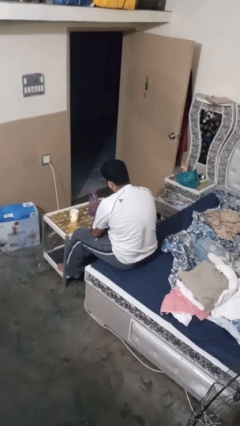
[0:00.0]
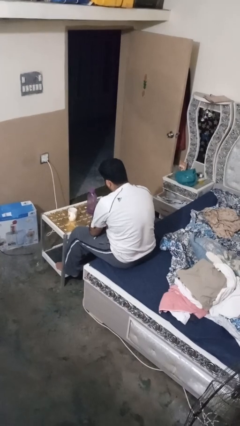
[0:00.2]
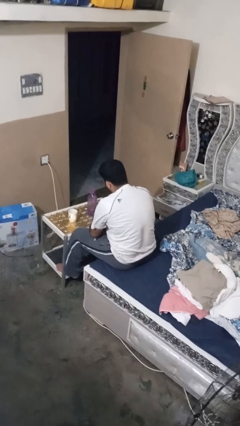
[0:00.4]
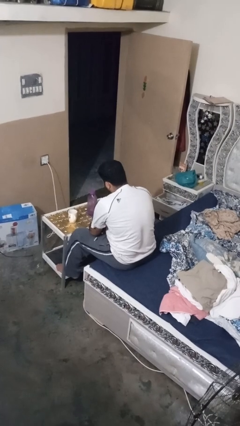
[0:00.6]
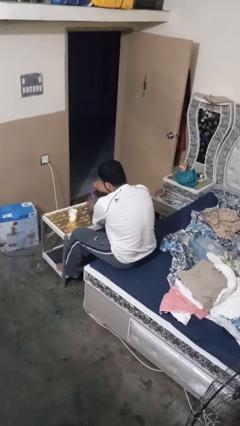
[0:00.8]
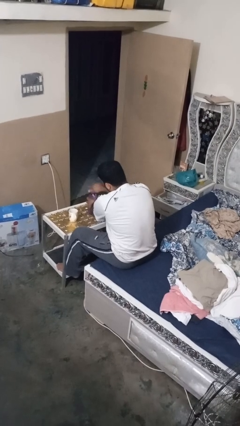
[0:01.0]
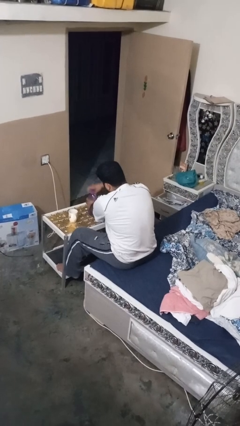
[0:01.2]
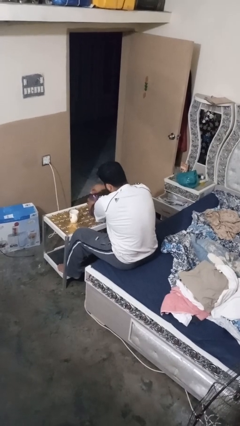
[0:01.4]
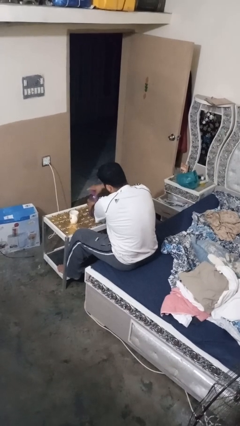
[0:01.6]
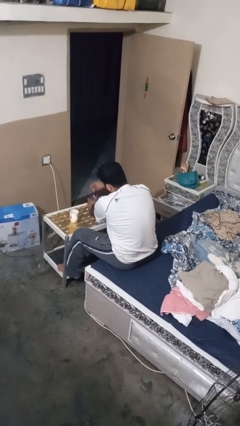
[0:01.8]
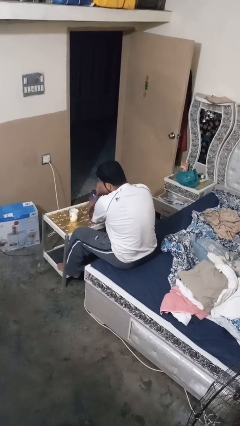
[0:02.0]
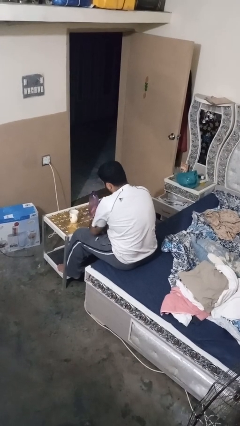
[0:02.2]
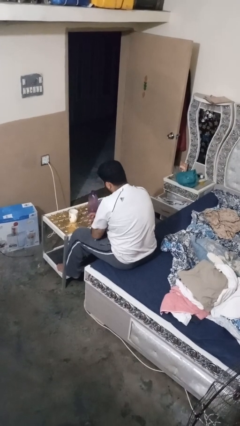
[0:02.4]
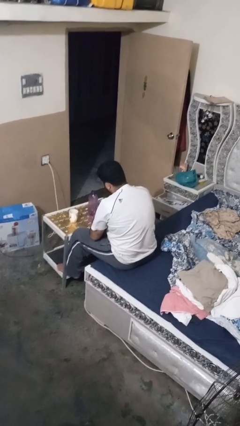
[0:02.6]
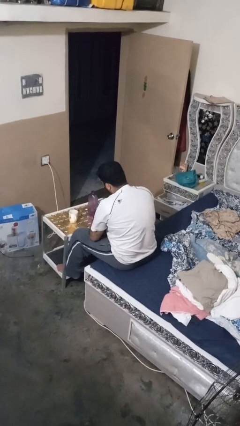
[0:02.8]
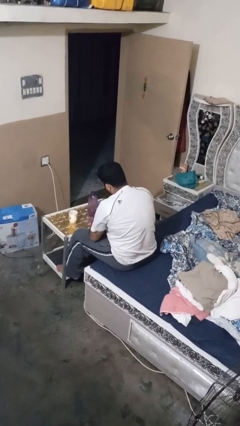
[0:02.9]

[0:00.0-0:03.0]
person unscrews lid from bottle

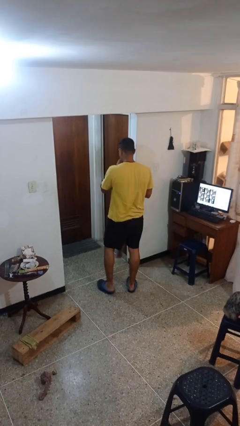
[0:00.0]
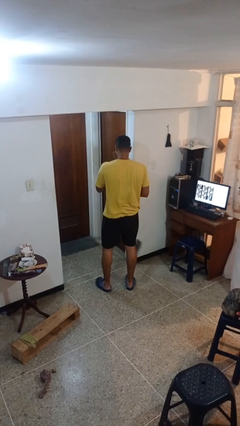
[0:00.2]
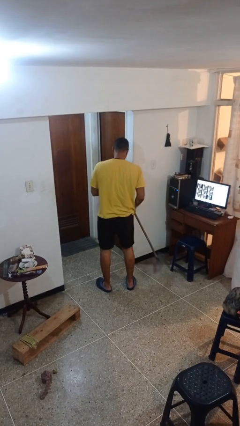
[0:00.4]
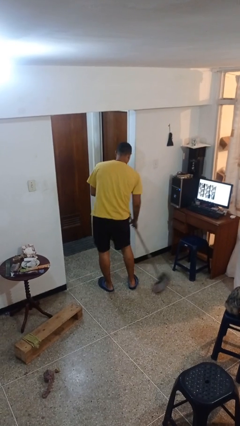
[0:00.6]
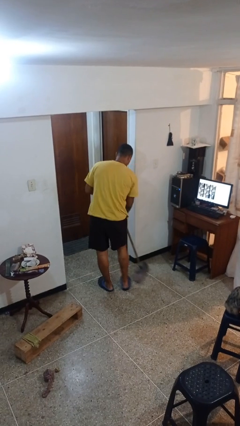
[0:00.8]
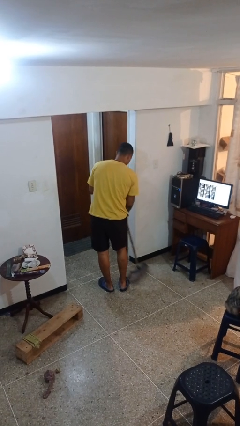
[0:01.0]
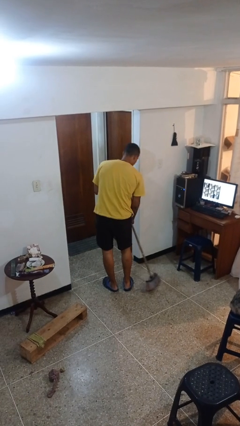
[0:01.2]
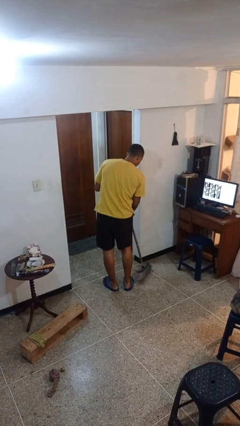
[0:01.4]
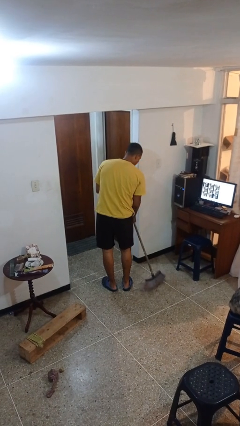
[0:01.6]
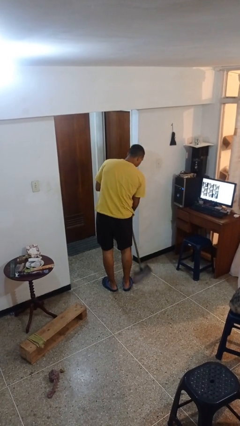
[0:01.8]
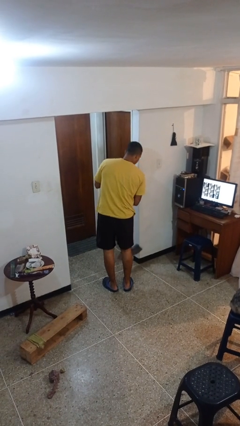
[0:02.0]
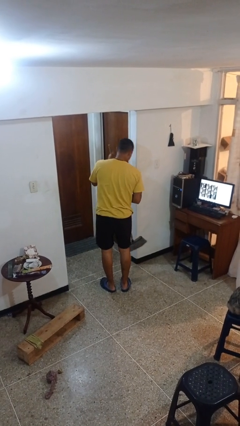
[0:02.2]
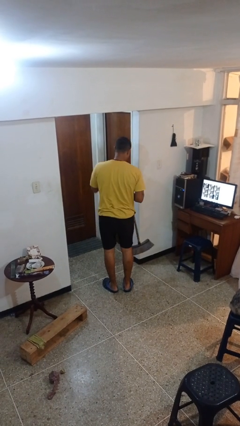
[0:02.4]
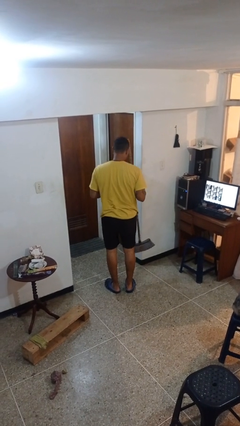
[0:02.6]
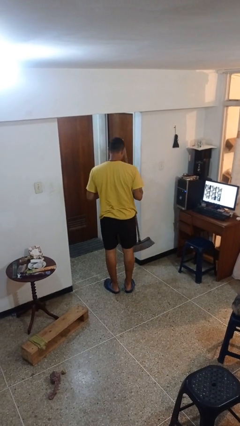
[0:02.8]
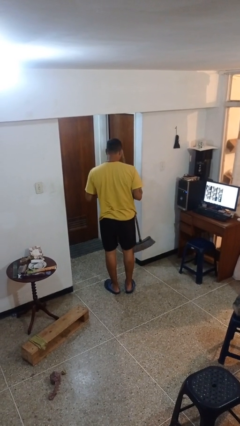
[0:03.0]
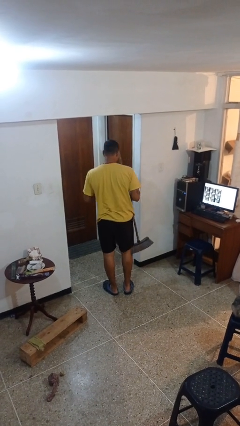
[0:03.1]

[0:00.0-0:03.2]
person sweeps floor

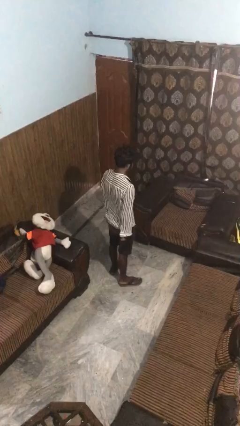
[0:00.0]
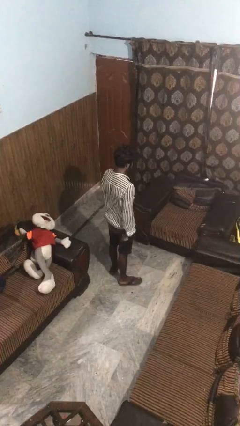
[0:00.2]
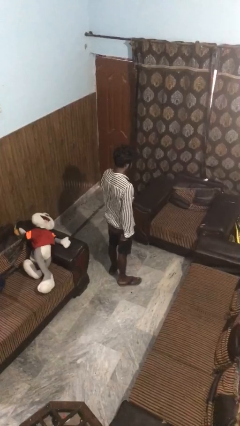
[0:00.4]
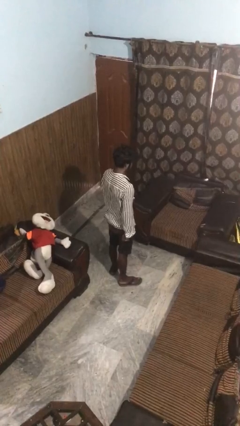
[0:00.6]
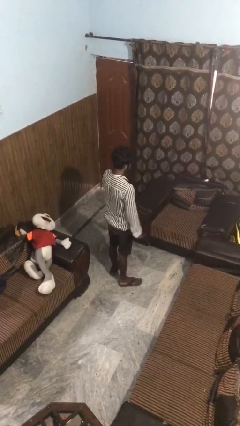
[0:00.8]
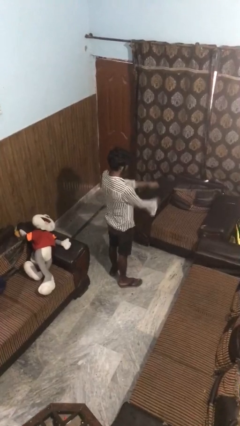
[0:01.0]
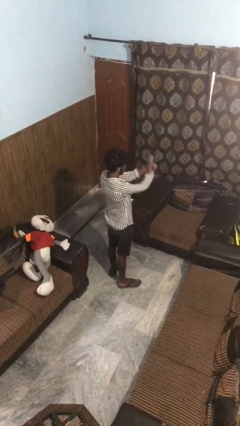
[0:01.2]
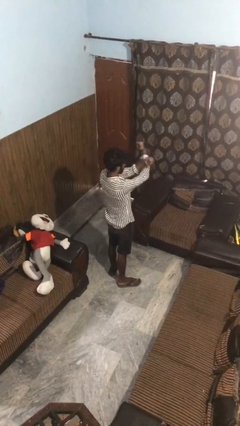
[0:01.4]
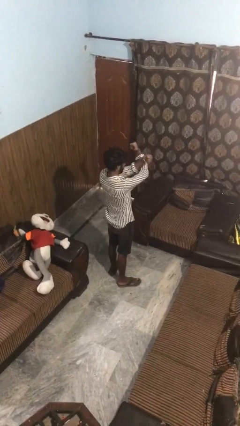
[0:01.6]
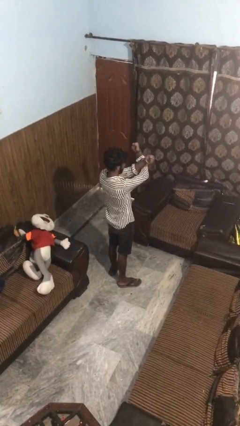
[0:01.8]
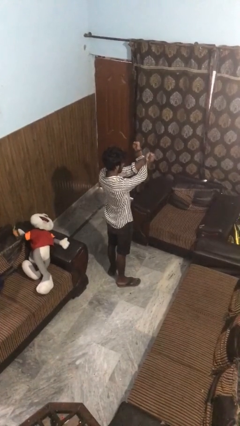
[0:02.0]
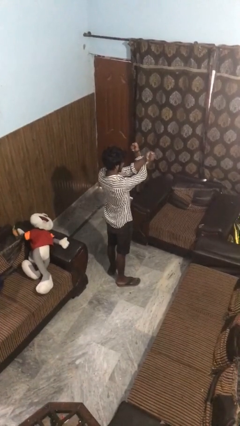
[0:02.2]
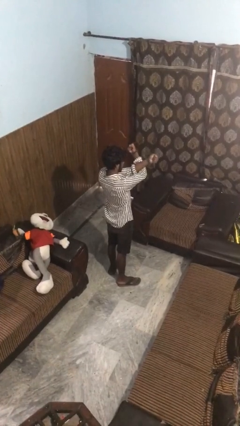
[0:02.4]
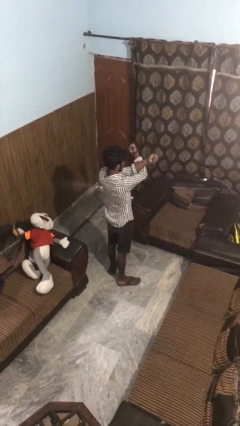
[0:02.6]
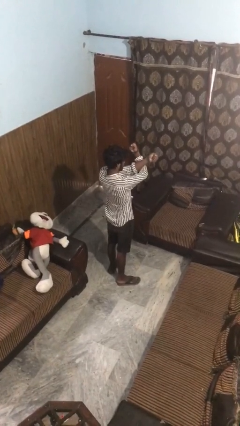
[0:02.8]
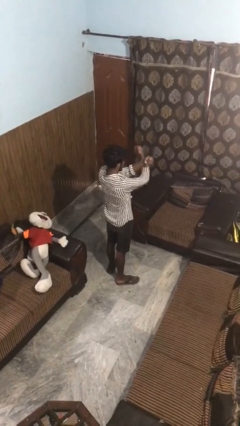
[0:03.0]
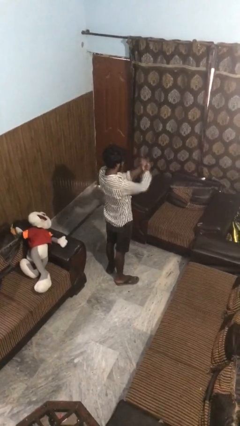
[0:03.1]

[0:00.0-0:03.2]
person gestures arms x

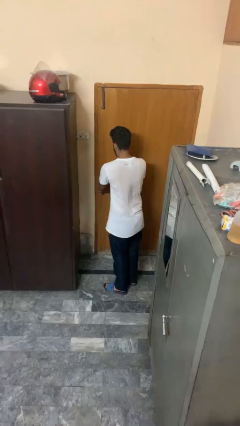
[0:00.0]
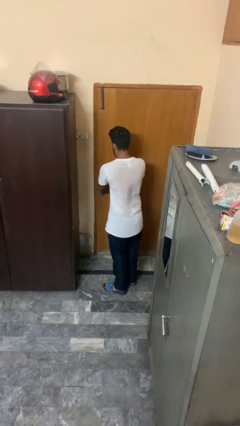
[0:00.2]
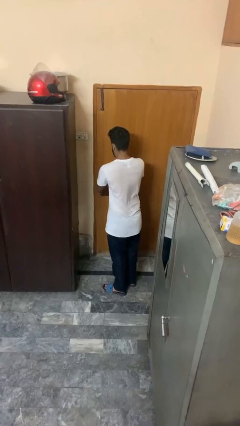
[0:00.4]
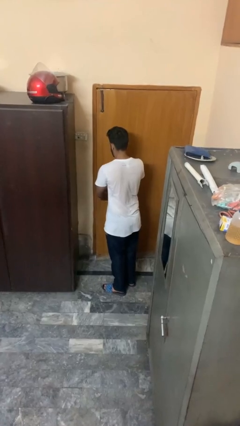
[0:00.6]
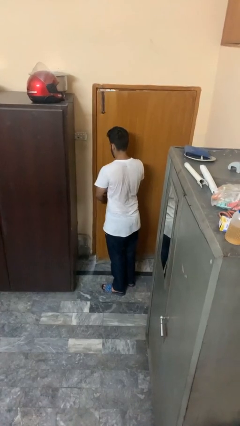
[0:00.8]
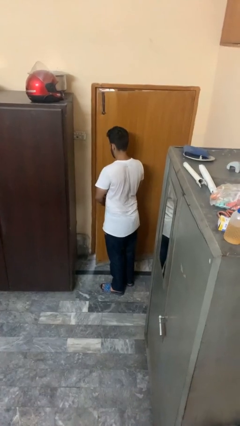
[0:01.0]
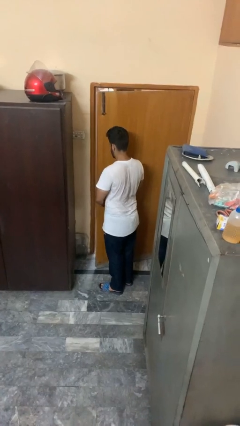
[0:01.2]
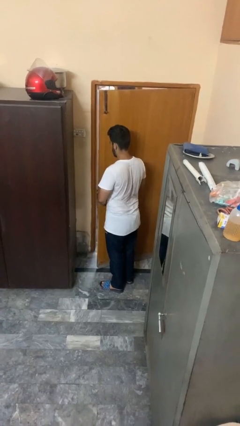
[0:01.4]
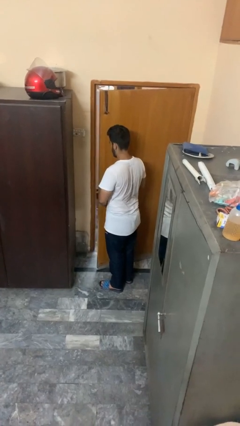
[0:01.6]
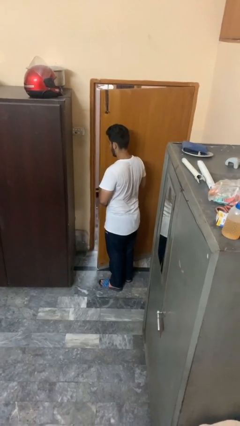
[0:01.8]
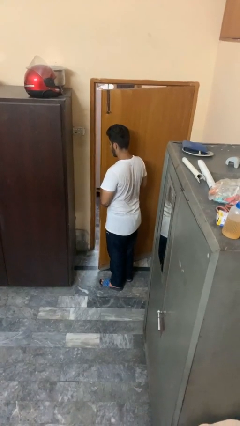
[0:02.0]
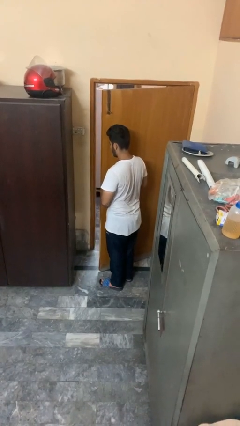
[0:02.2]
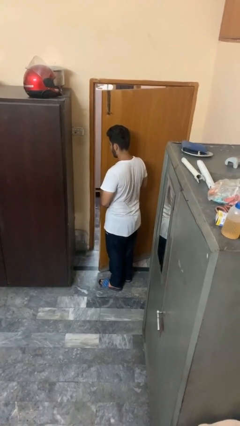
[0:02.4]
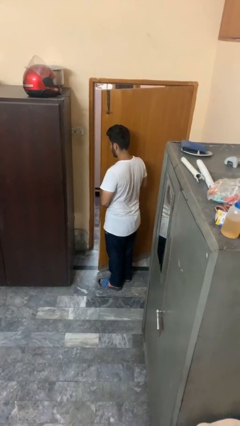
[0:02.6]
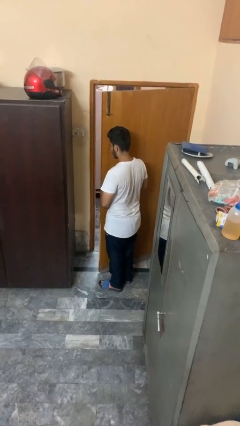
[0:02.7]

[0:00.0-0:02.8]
person opens facility door

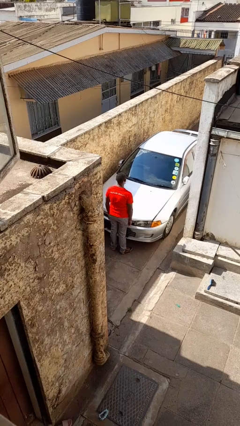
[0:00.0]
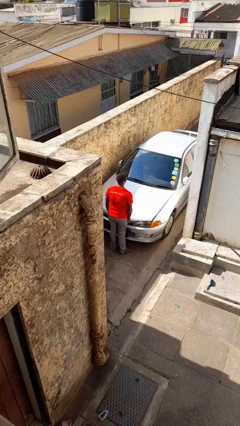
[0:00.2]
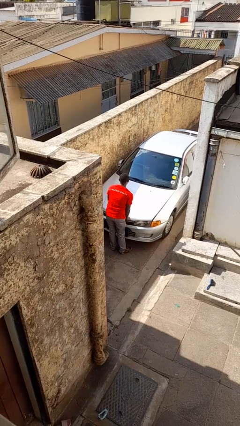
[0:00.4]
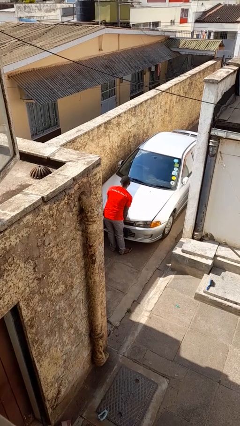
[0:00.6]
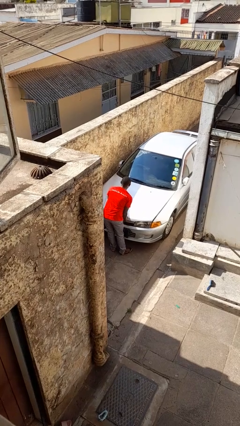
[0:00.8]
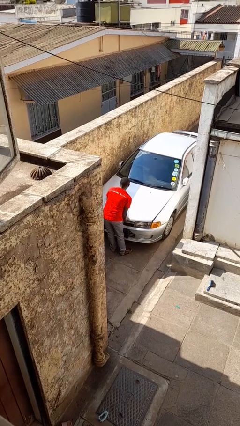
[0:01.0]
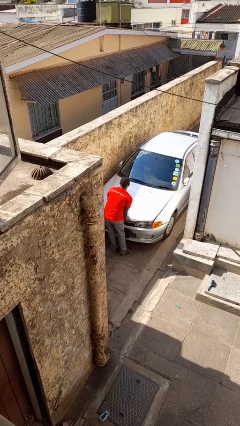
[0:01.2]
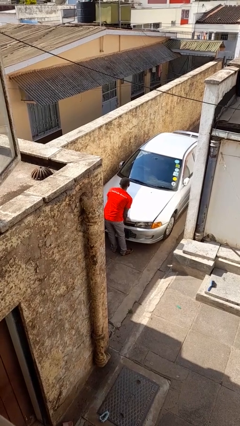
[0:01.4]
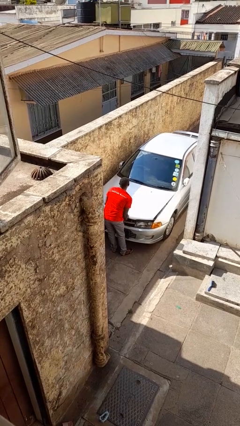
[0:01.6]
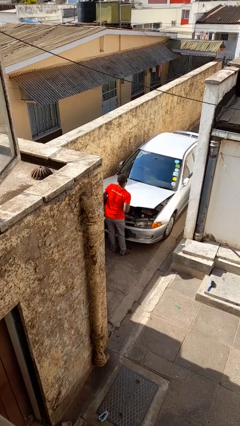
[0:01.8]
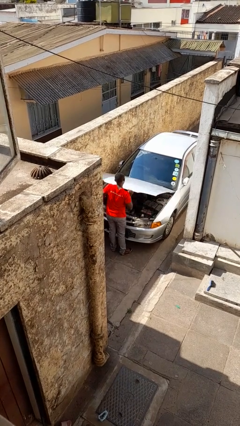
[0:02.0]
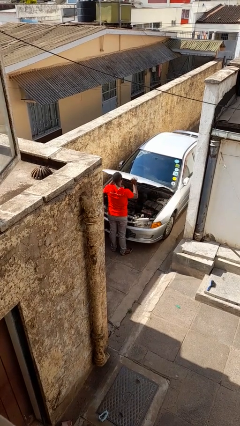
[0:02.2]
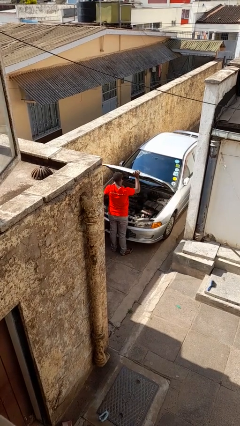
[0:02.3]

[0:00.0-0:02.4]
person opens car hood

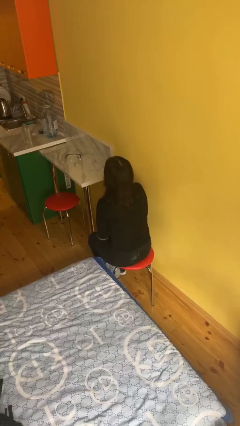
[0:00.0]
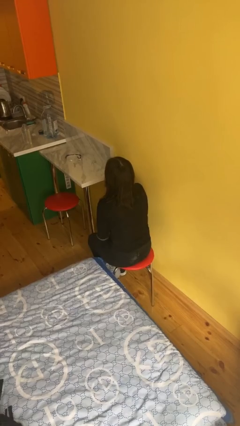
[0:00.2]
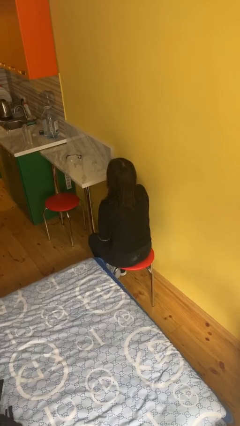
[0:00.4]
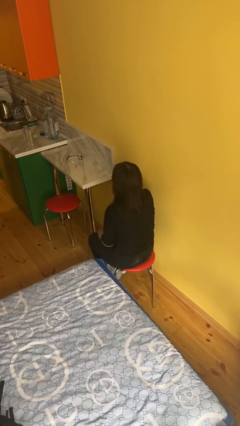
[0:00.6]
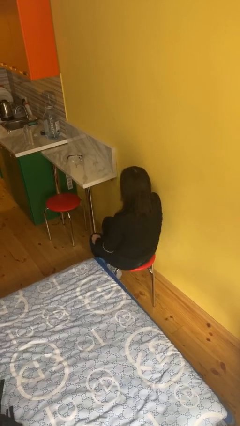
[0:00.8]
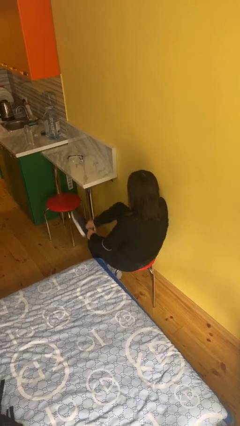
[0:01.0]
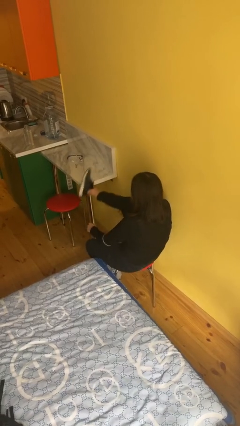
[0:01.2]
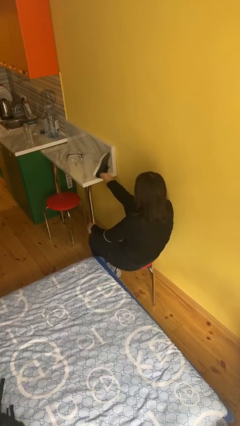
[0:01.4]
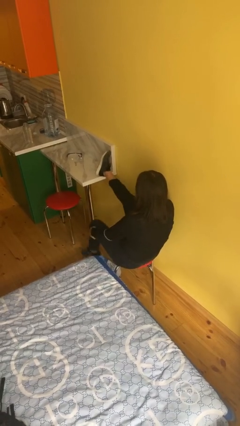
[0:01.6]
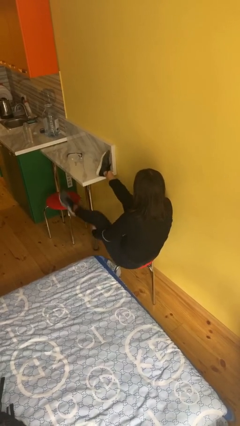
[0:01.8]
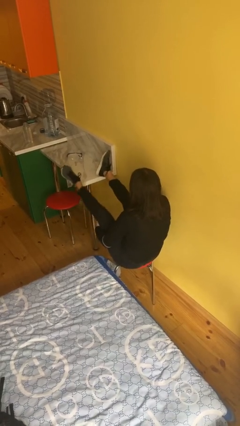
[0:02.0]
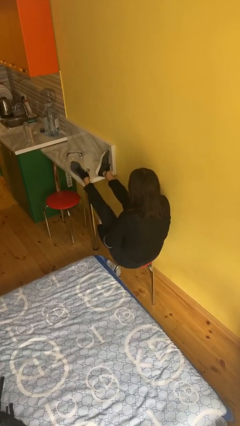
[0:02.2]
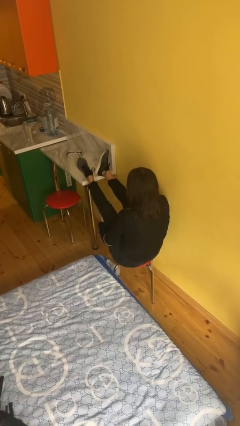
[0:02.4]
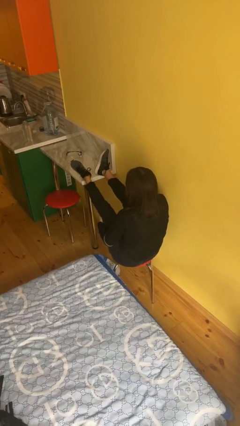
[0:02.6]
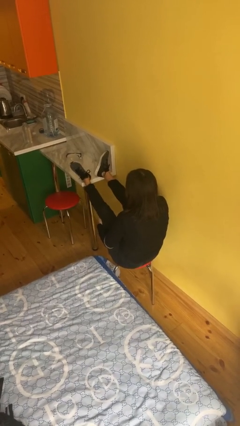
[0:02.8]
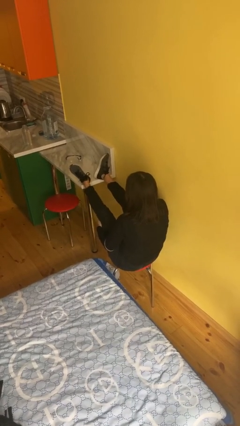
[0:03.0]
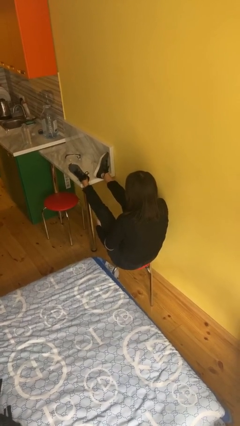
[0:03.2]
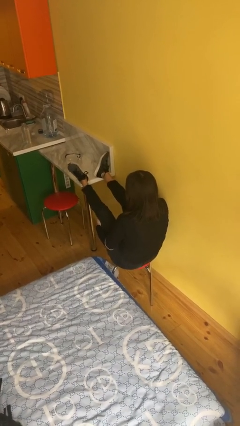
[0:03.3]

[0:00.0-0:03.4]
person puts feet up
